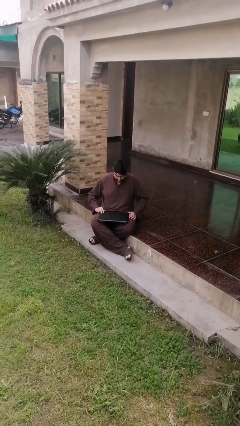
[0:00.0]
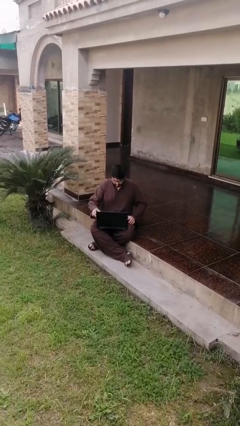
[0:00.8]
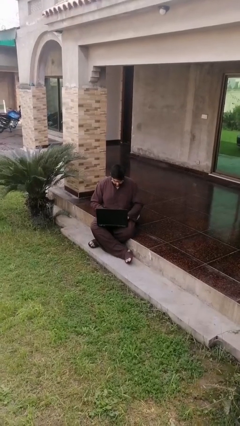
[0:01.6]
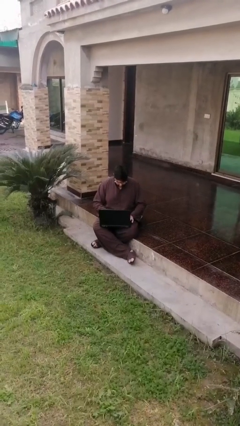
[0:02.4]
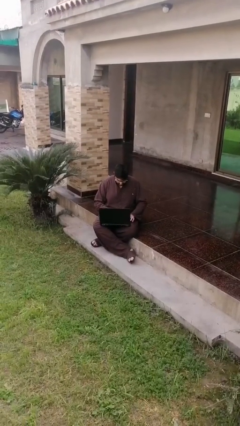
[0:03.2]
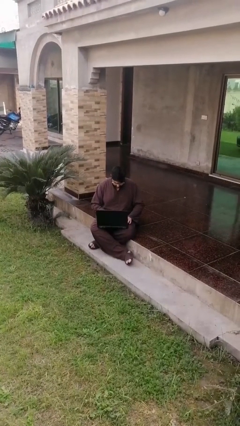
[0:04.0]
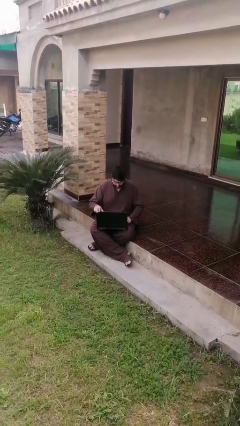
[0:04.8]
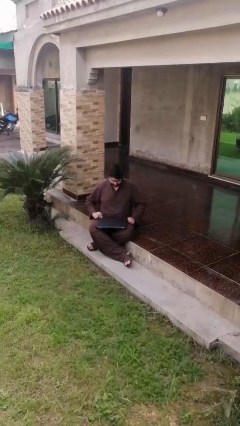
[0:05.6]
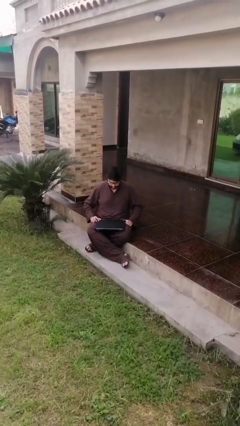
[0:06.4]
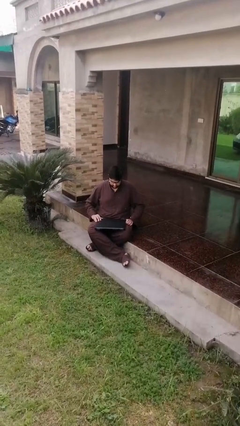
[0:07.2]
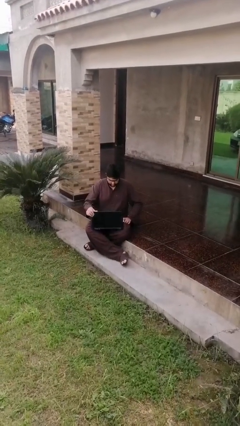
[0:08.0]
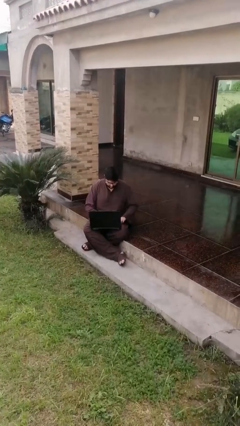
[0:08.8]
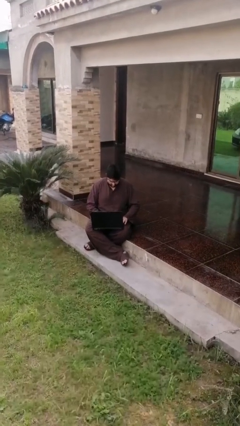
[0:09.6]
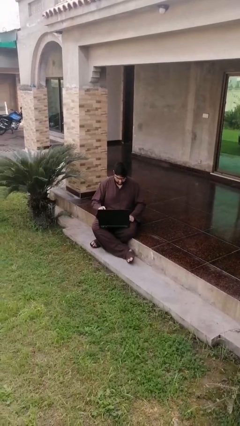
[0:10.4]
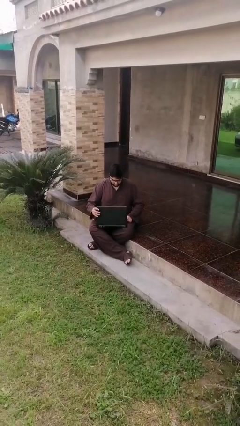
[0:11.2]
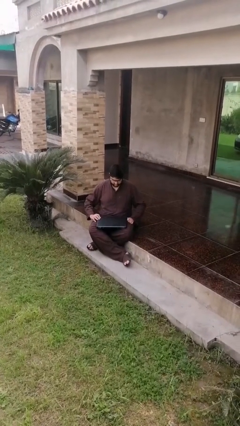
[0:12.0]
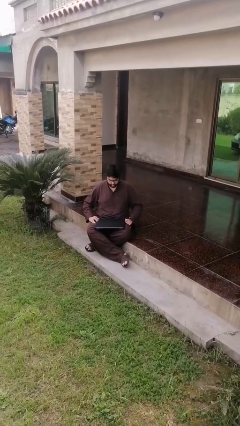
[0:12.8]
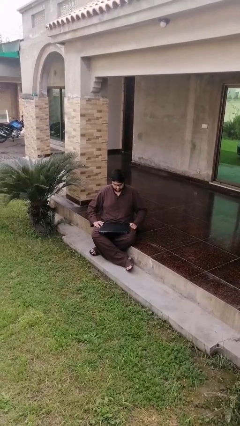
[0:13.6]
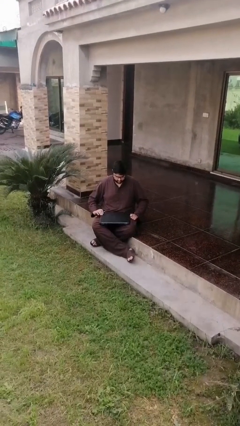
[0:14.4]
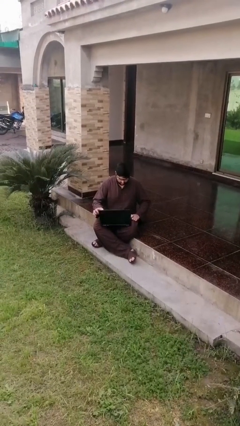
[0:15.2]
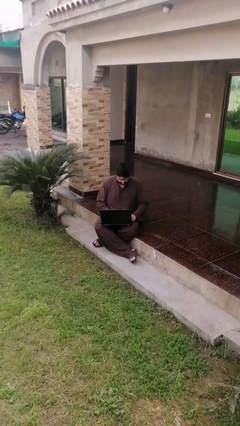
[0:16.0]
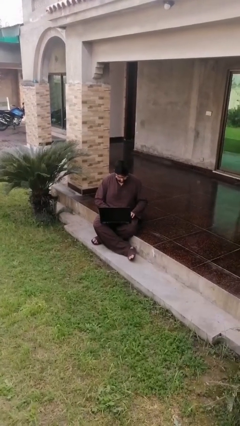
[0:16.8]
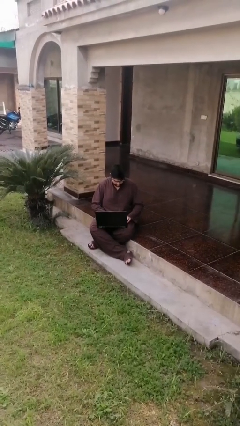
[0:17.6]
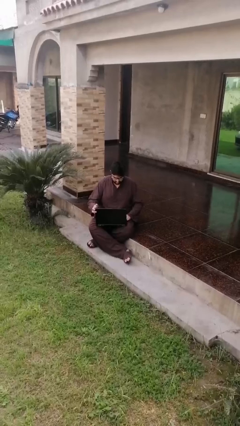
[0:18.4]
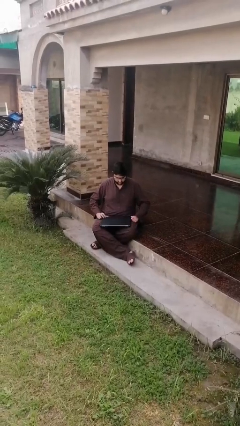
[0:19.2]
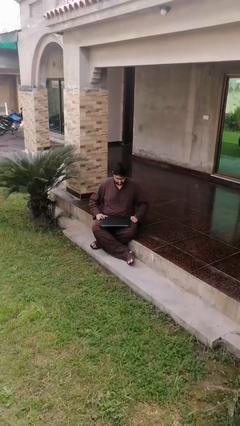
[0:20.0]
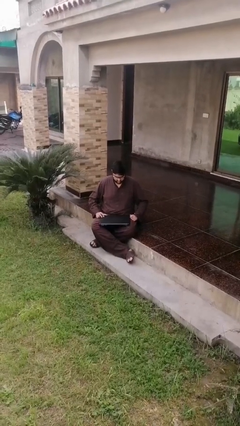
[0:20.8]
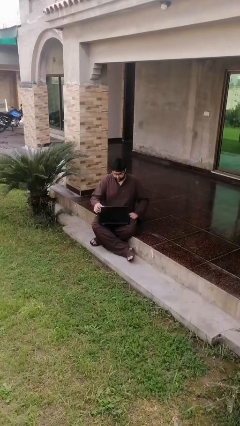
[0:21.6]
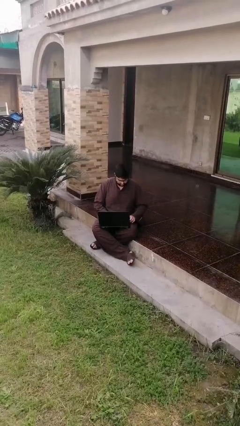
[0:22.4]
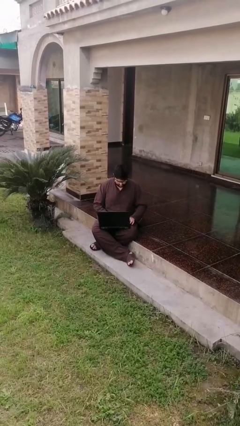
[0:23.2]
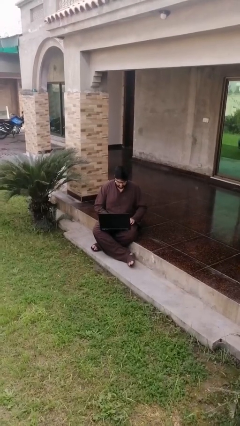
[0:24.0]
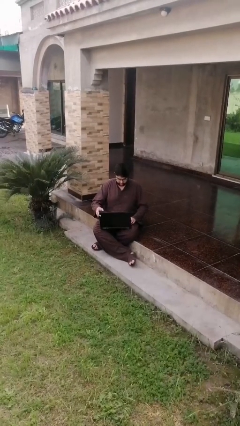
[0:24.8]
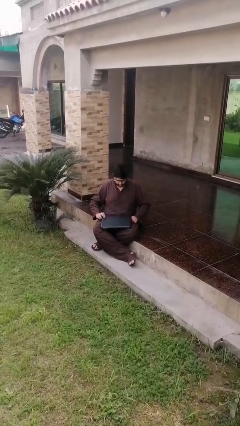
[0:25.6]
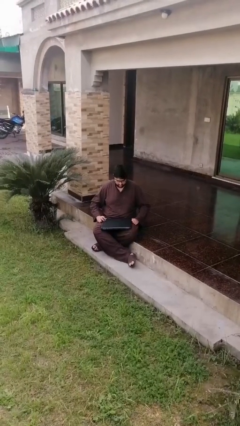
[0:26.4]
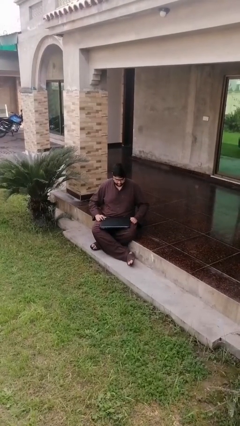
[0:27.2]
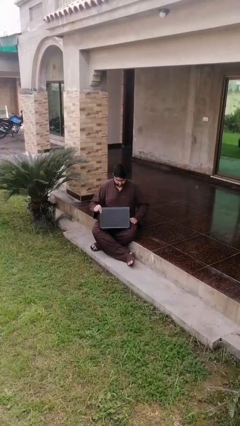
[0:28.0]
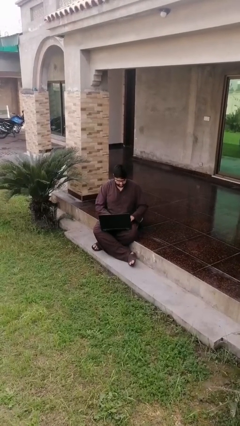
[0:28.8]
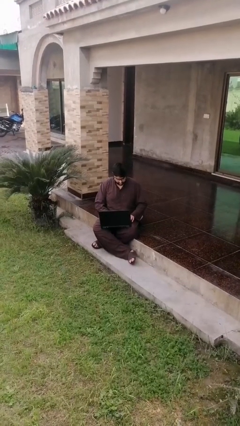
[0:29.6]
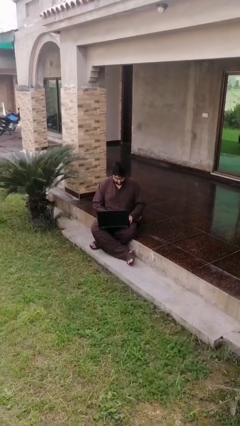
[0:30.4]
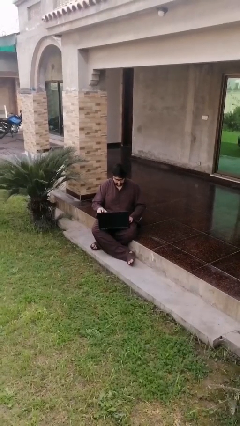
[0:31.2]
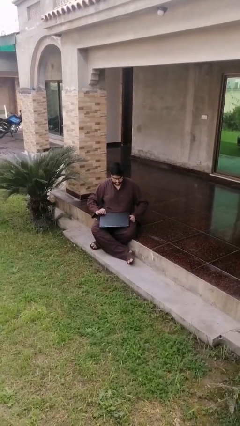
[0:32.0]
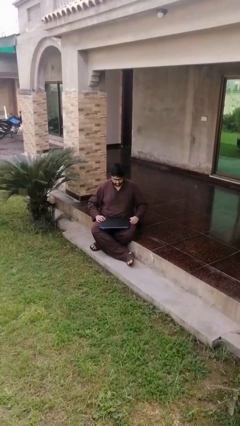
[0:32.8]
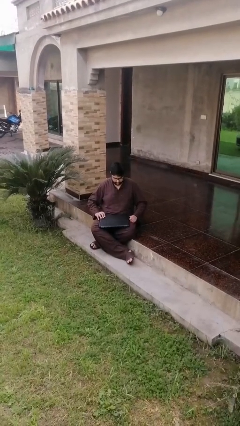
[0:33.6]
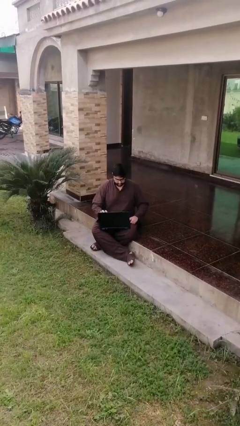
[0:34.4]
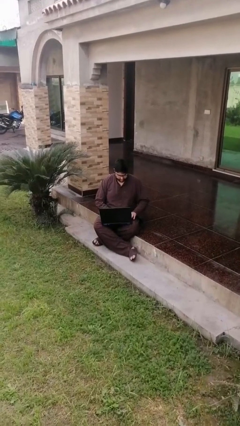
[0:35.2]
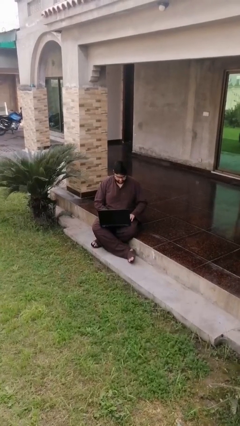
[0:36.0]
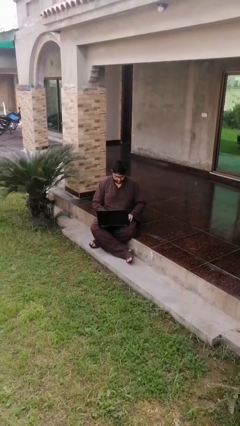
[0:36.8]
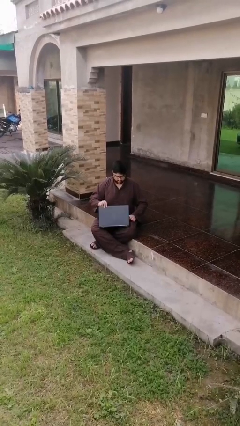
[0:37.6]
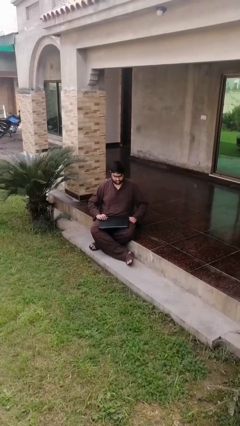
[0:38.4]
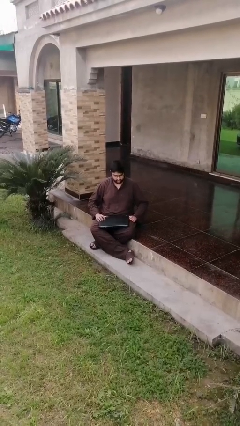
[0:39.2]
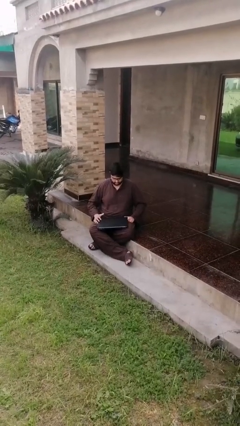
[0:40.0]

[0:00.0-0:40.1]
person interacts with laptop

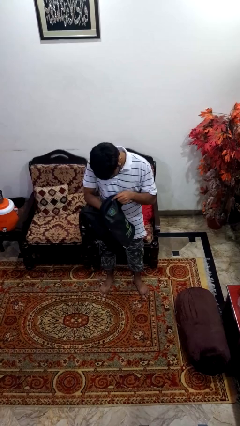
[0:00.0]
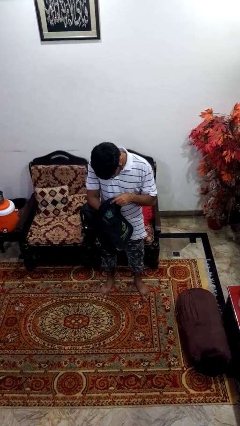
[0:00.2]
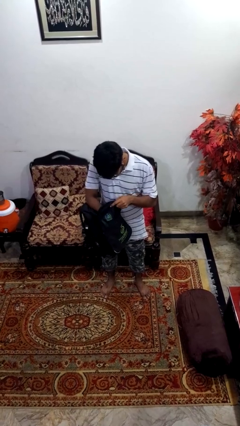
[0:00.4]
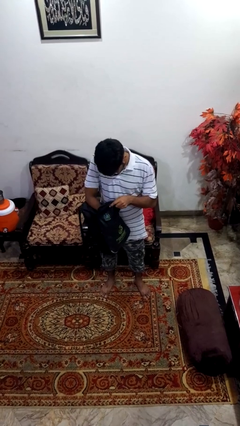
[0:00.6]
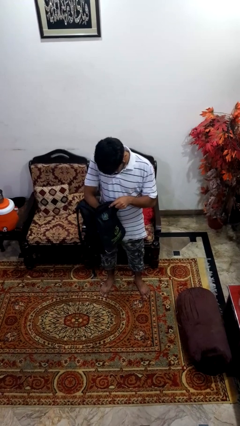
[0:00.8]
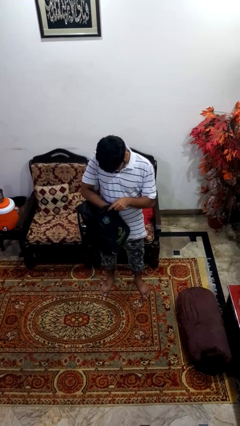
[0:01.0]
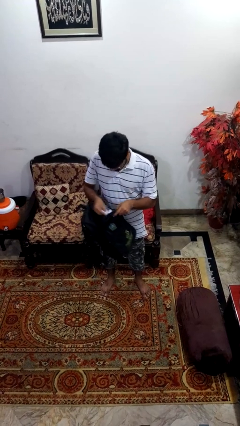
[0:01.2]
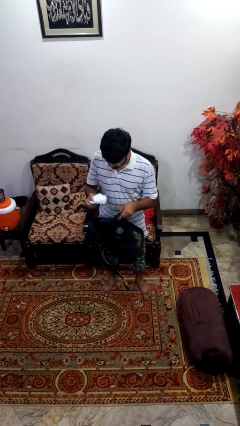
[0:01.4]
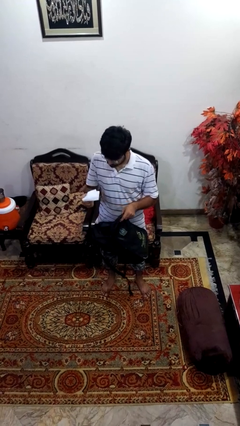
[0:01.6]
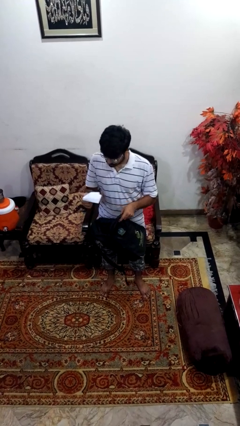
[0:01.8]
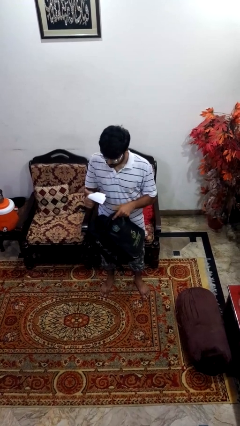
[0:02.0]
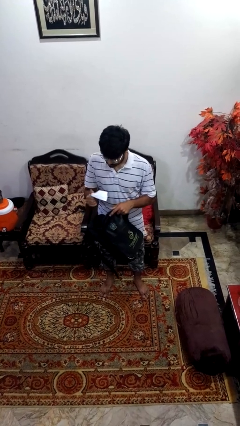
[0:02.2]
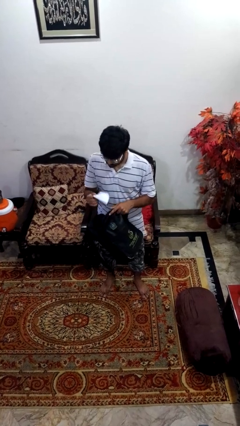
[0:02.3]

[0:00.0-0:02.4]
person takes object from backpack

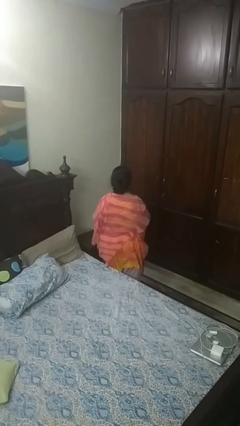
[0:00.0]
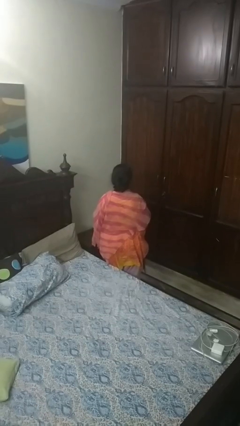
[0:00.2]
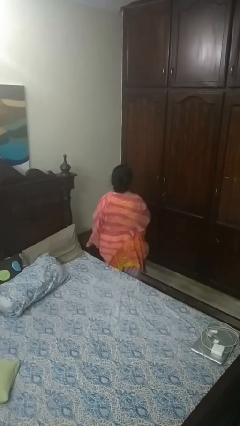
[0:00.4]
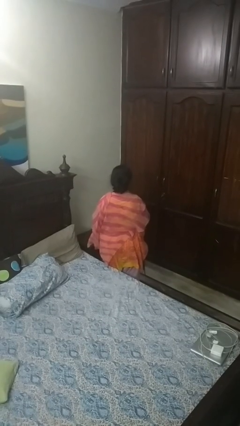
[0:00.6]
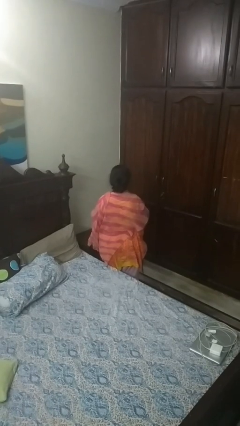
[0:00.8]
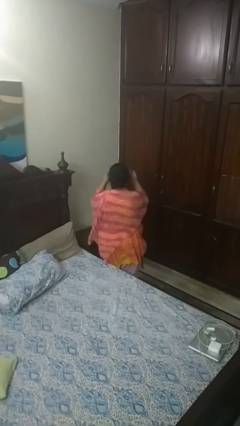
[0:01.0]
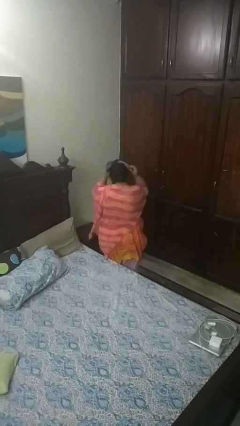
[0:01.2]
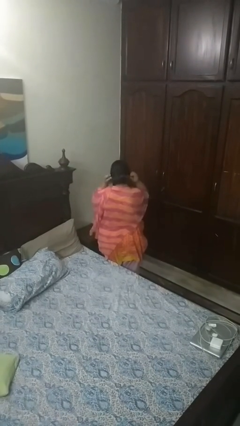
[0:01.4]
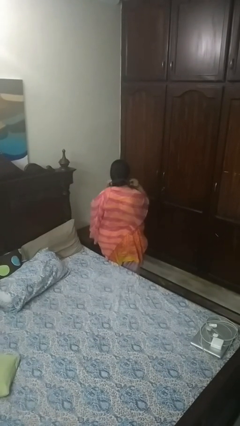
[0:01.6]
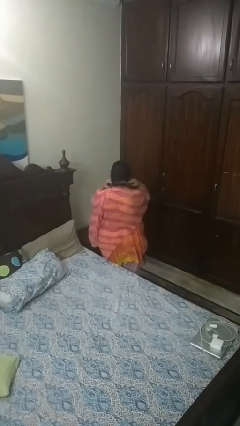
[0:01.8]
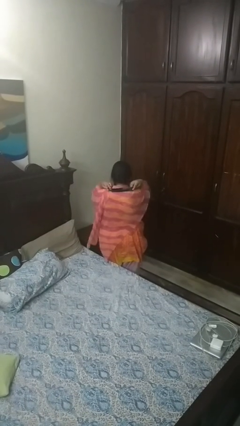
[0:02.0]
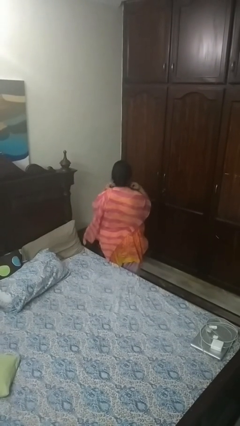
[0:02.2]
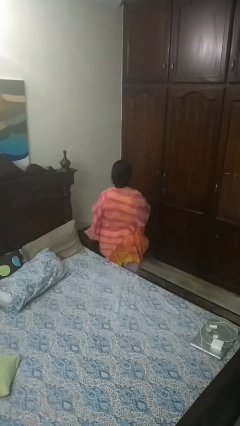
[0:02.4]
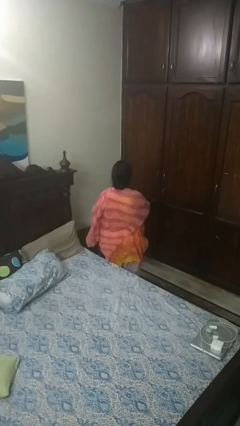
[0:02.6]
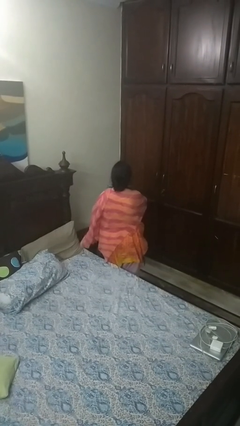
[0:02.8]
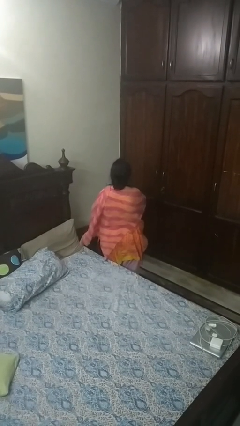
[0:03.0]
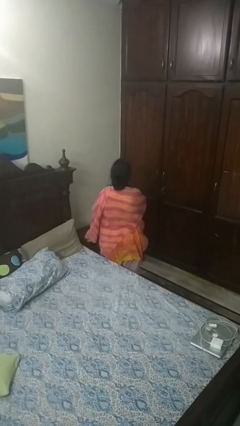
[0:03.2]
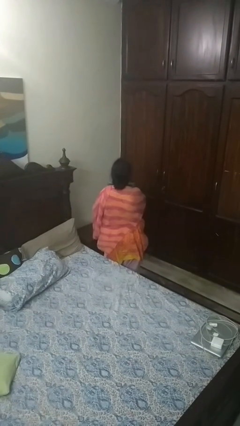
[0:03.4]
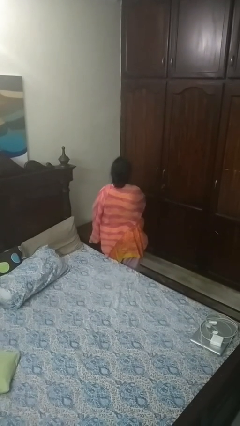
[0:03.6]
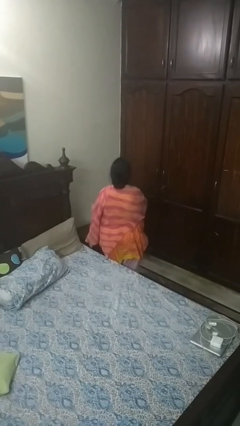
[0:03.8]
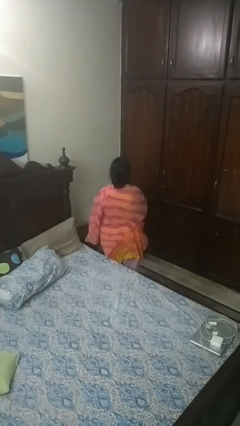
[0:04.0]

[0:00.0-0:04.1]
person puts on necktie

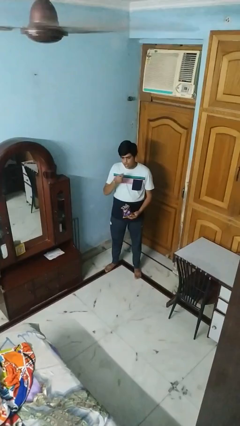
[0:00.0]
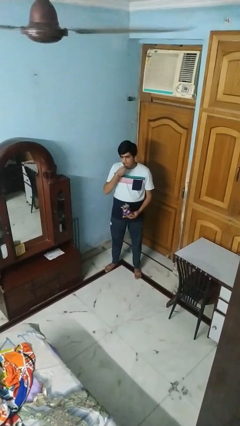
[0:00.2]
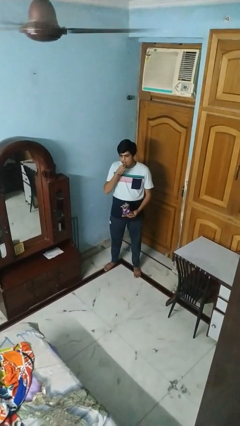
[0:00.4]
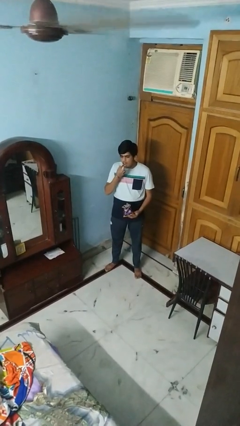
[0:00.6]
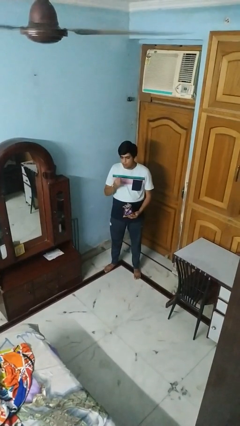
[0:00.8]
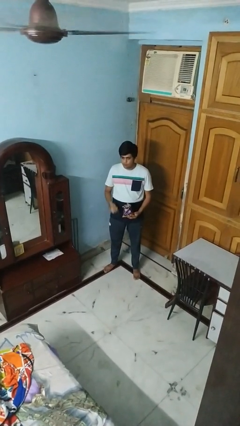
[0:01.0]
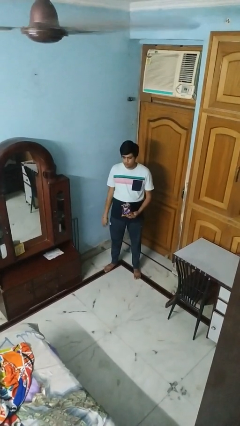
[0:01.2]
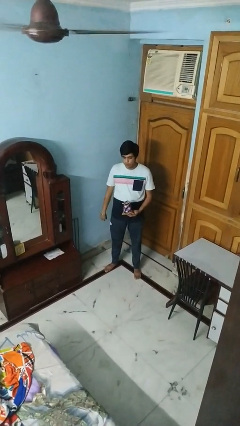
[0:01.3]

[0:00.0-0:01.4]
person eats snack from bag

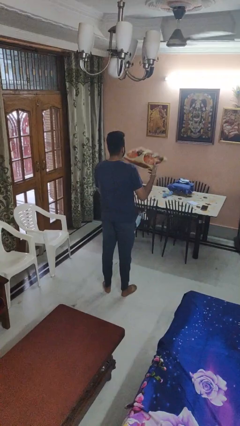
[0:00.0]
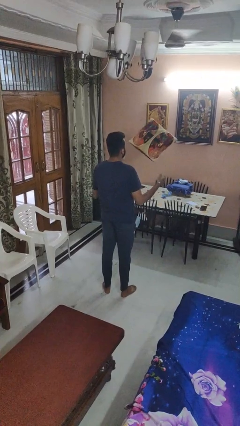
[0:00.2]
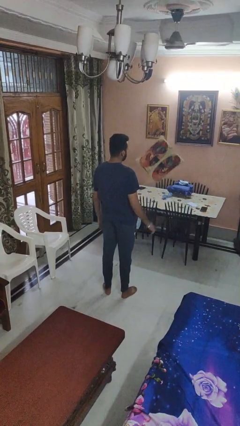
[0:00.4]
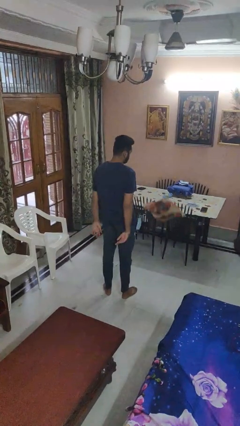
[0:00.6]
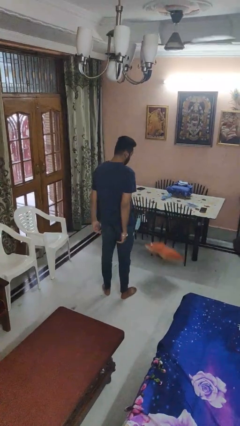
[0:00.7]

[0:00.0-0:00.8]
person throws object into air
